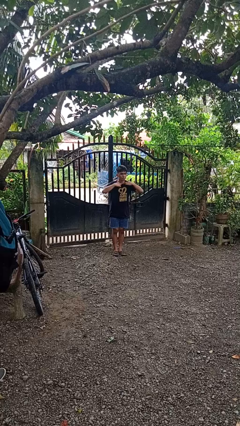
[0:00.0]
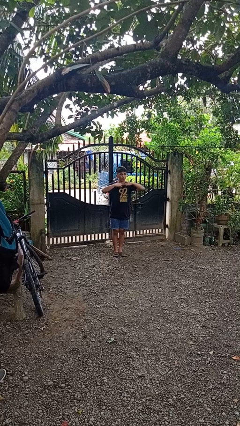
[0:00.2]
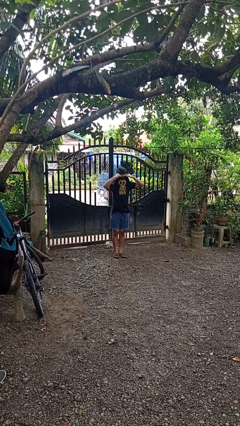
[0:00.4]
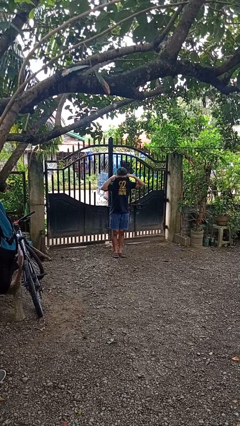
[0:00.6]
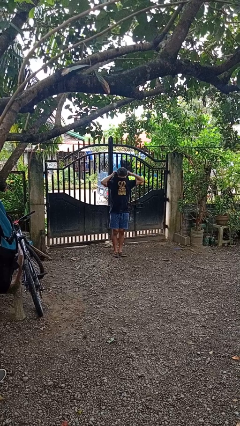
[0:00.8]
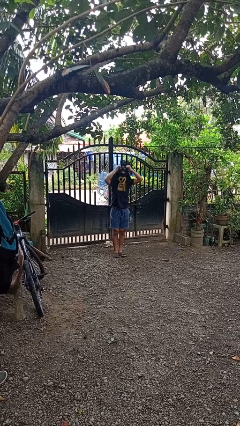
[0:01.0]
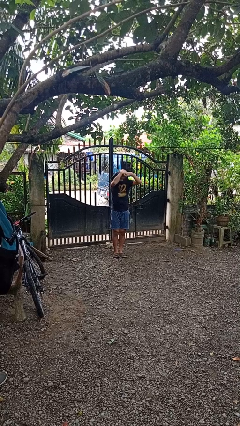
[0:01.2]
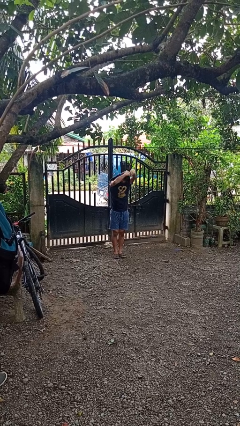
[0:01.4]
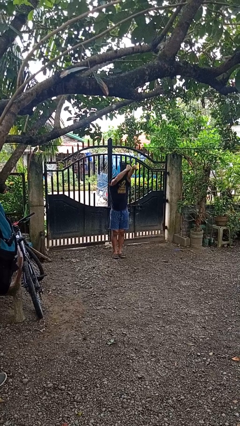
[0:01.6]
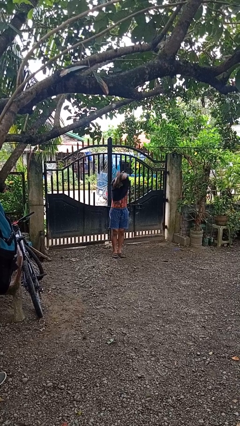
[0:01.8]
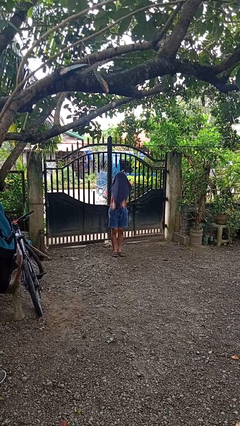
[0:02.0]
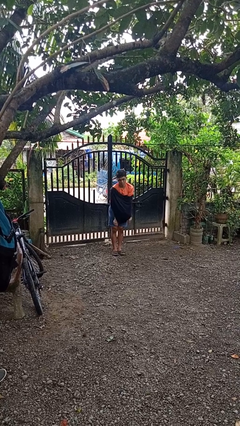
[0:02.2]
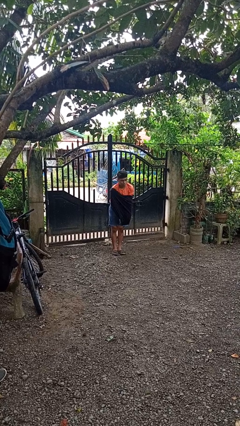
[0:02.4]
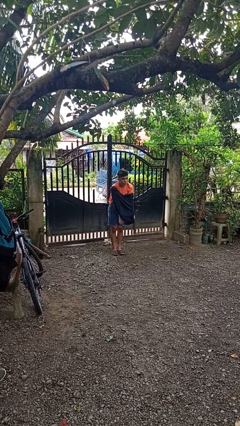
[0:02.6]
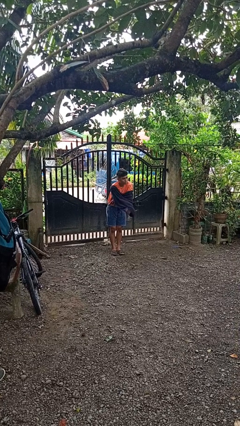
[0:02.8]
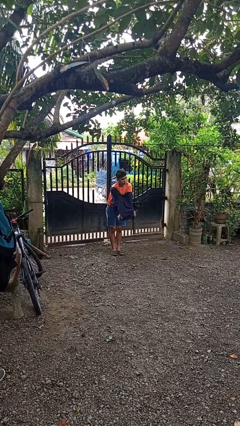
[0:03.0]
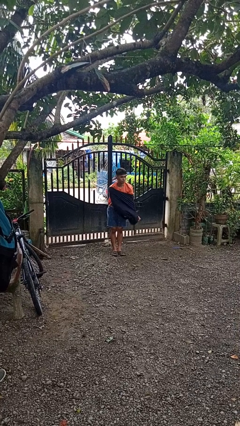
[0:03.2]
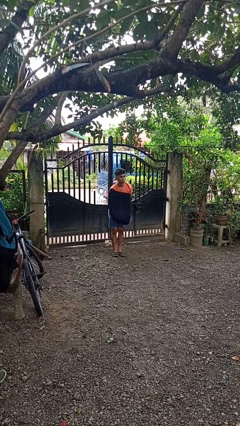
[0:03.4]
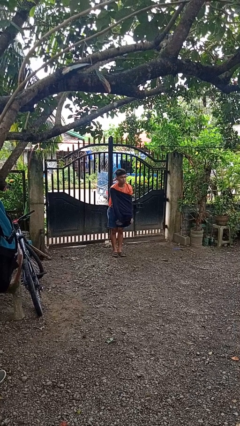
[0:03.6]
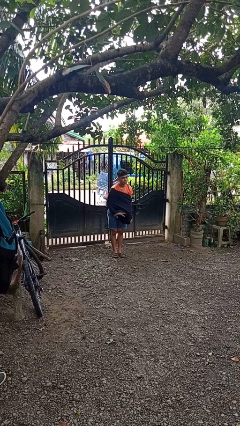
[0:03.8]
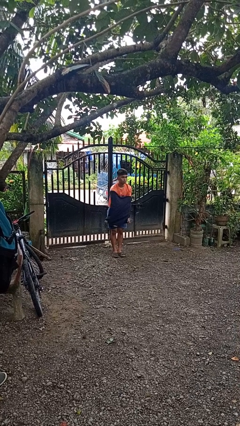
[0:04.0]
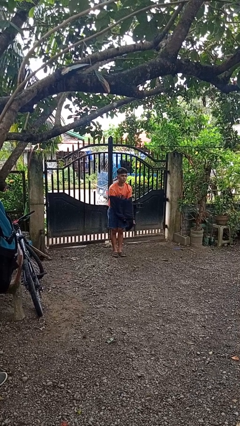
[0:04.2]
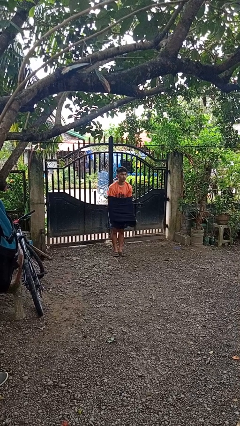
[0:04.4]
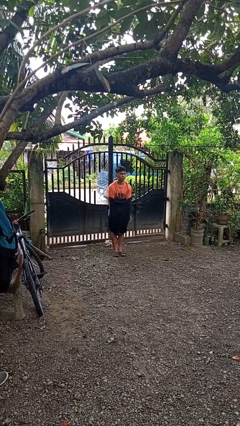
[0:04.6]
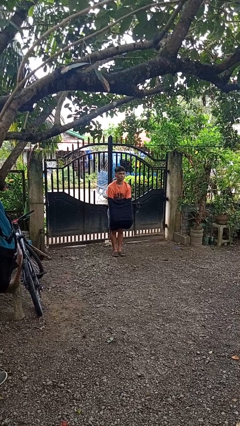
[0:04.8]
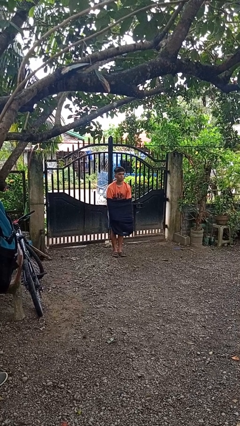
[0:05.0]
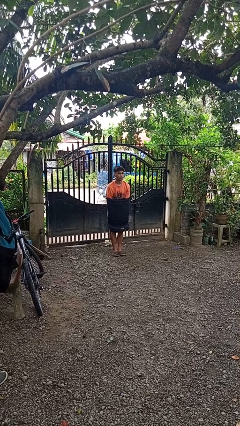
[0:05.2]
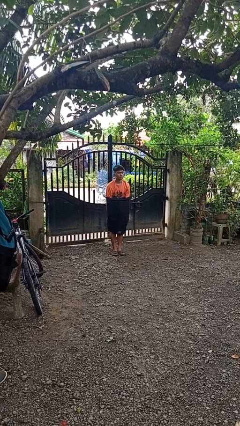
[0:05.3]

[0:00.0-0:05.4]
person takes off shirt

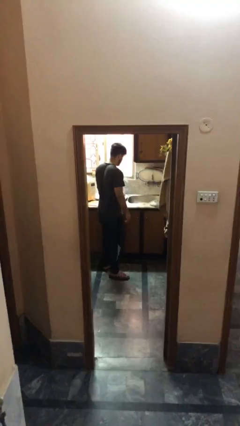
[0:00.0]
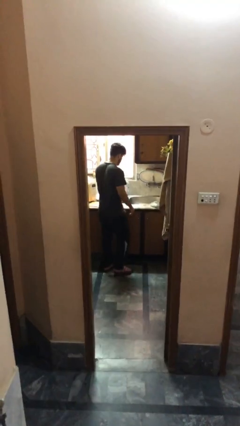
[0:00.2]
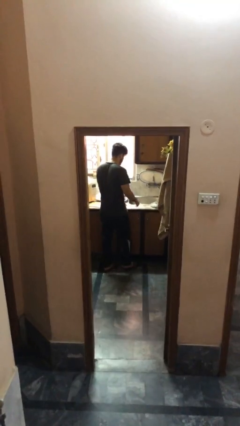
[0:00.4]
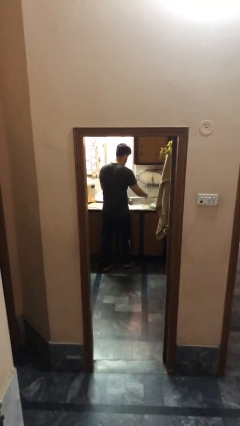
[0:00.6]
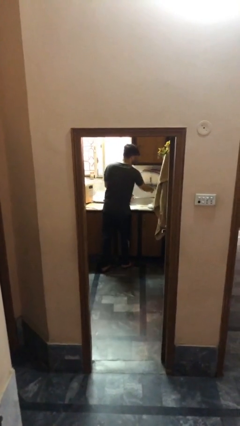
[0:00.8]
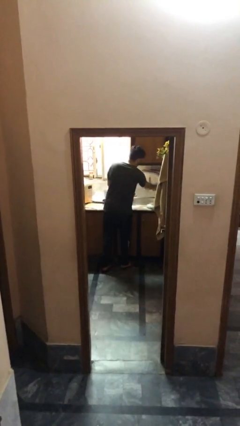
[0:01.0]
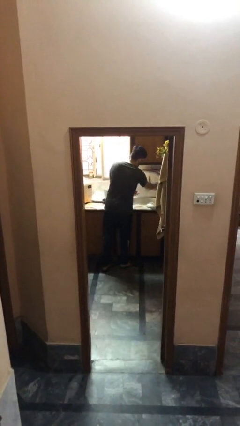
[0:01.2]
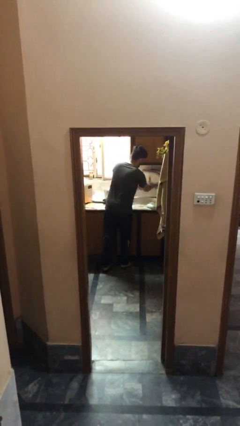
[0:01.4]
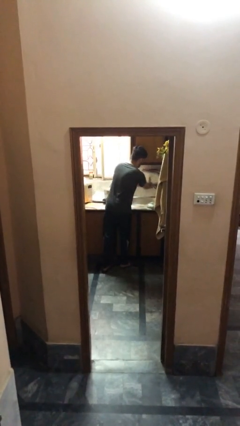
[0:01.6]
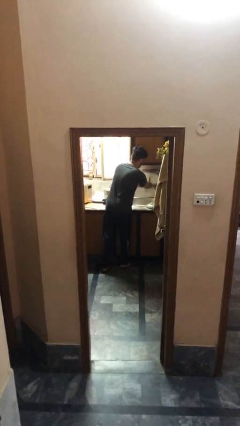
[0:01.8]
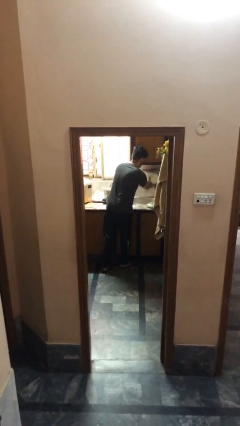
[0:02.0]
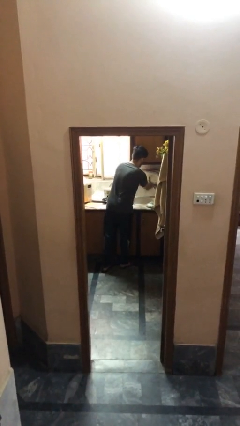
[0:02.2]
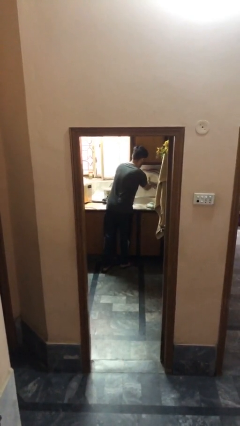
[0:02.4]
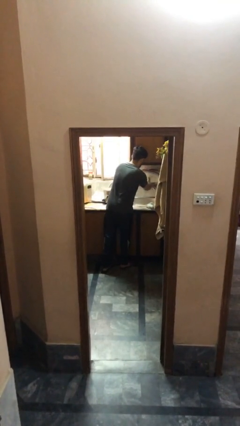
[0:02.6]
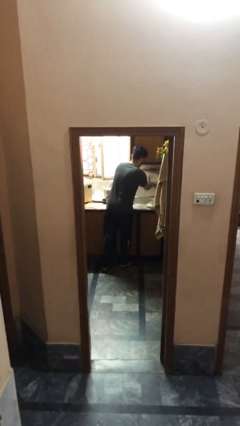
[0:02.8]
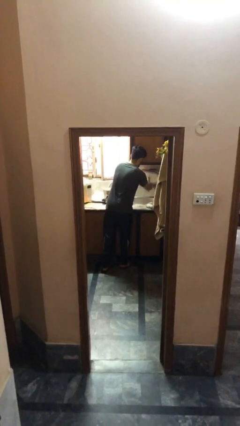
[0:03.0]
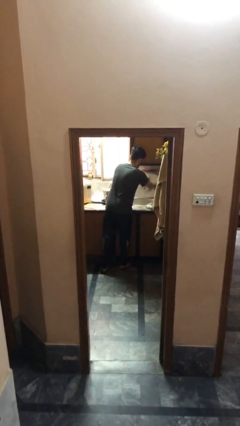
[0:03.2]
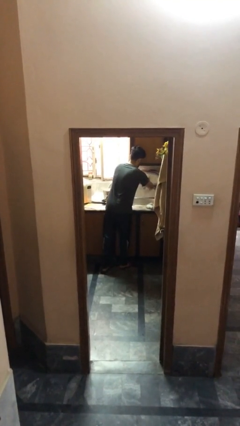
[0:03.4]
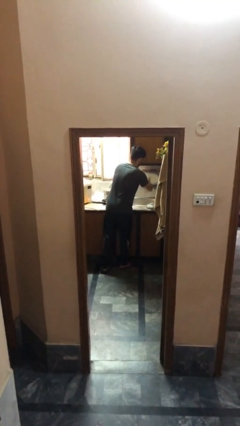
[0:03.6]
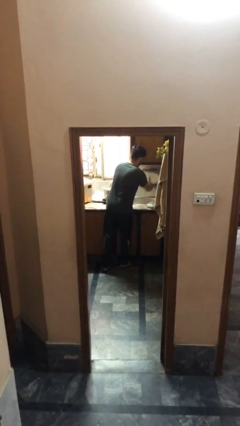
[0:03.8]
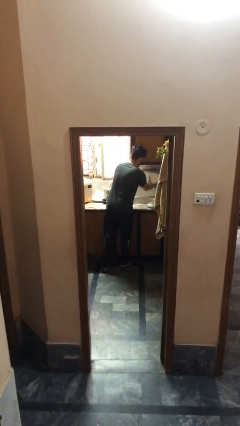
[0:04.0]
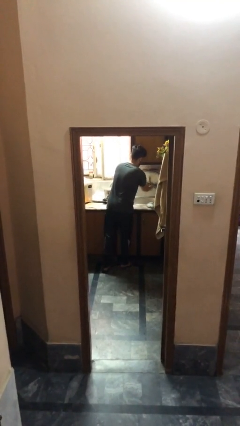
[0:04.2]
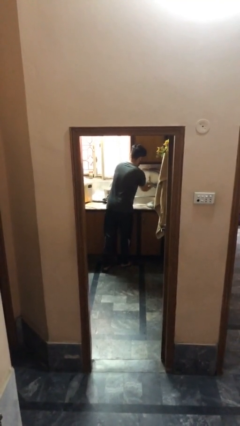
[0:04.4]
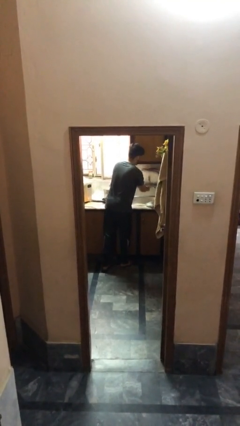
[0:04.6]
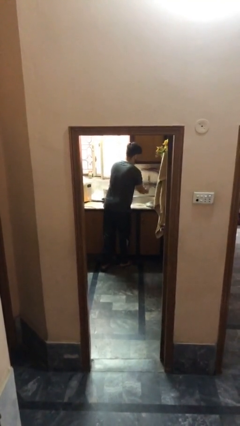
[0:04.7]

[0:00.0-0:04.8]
person washes hands

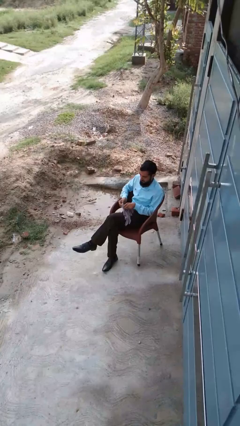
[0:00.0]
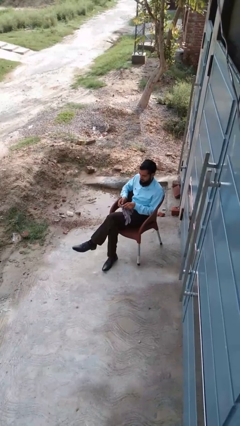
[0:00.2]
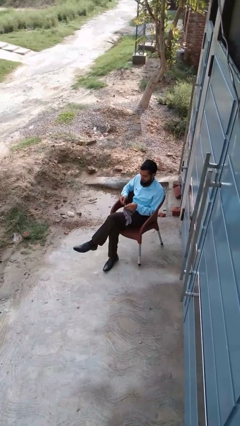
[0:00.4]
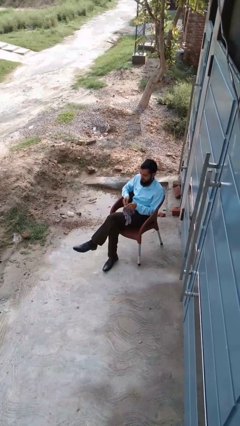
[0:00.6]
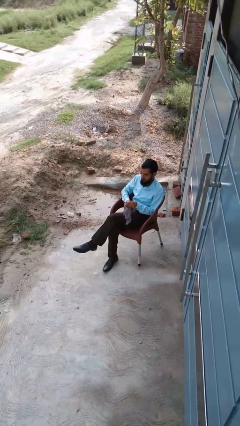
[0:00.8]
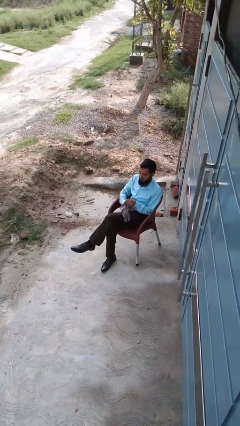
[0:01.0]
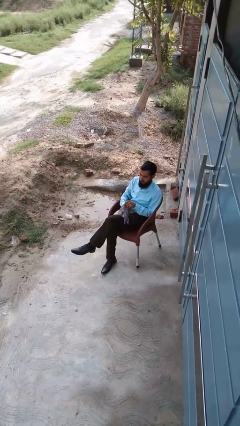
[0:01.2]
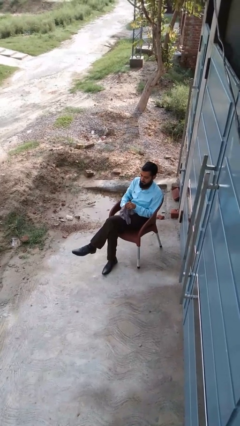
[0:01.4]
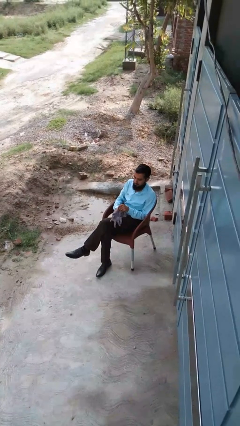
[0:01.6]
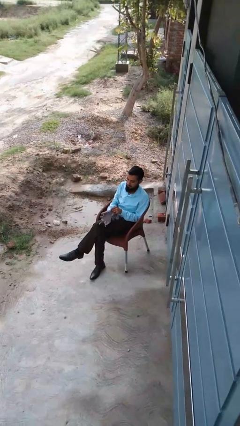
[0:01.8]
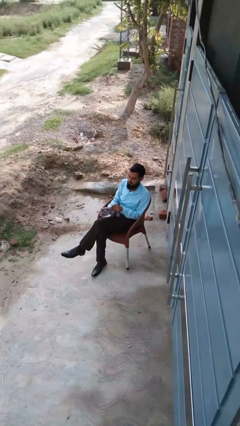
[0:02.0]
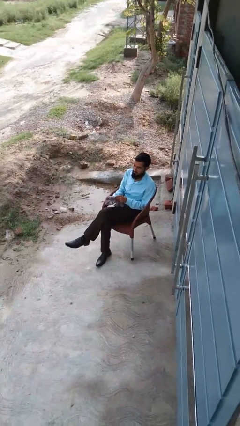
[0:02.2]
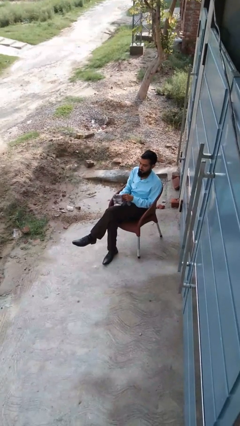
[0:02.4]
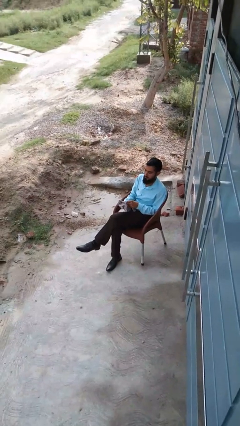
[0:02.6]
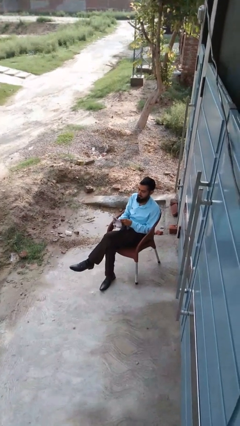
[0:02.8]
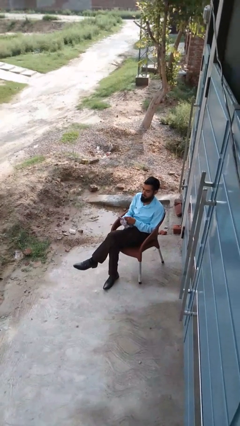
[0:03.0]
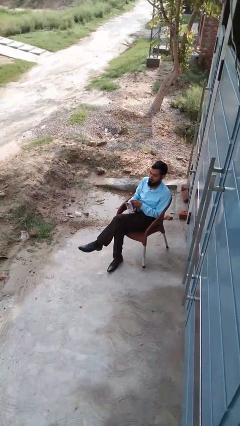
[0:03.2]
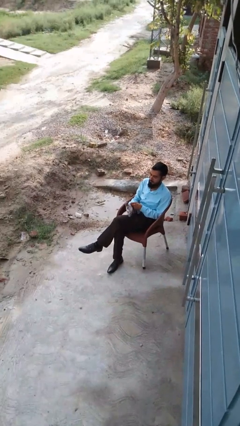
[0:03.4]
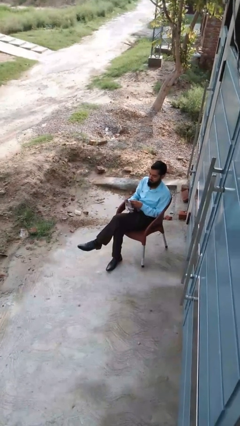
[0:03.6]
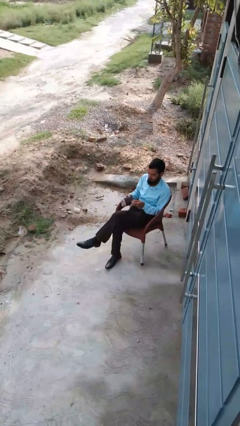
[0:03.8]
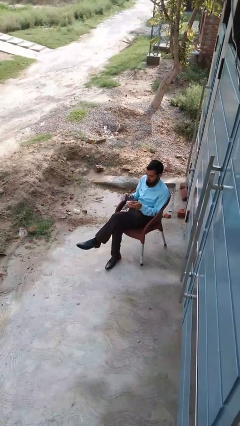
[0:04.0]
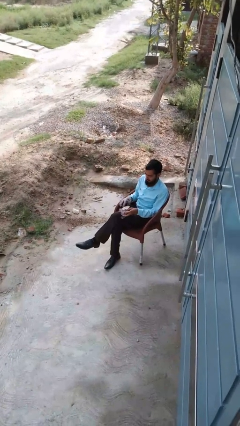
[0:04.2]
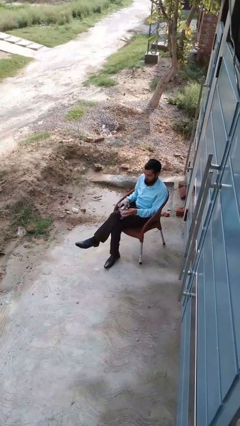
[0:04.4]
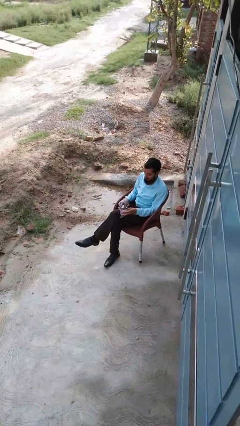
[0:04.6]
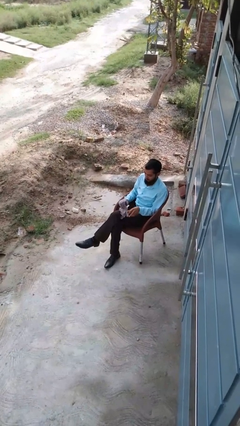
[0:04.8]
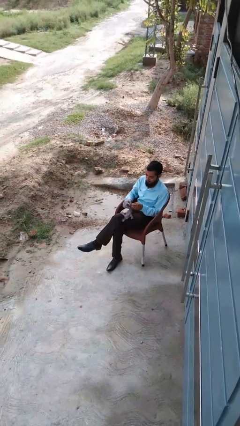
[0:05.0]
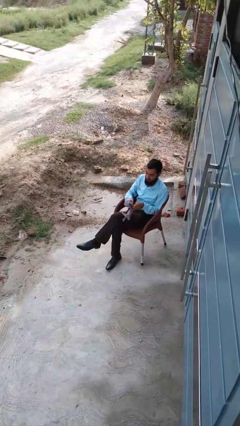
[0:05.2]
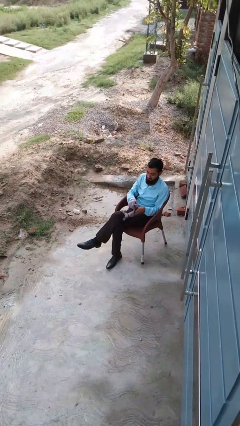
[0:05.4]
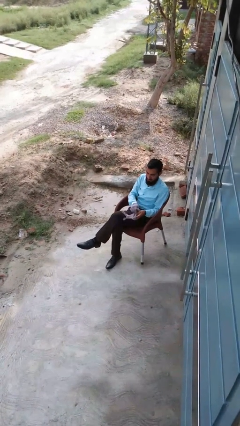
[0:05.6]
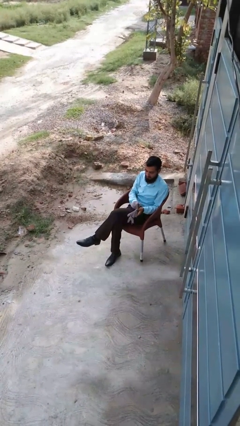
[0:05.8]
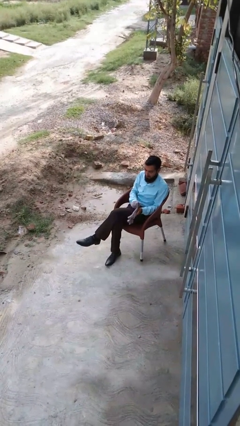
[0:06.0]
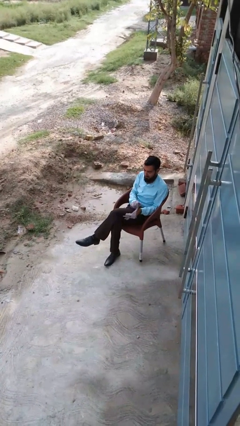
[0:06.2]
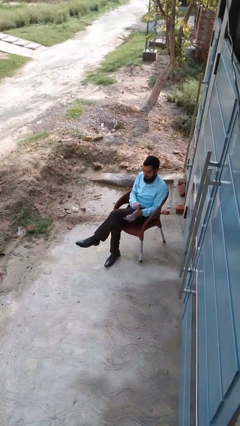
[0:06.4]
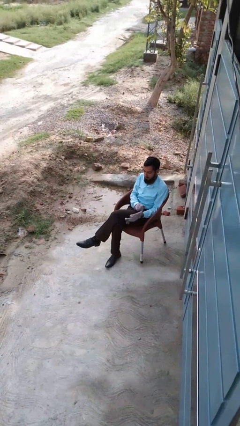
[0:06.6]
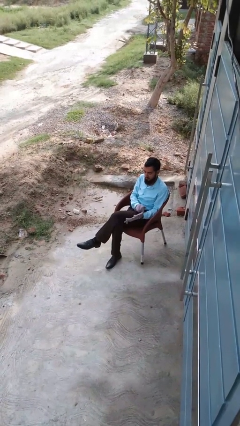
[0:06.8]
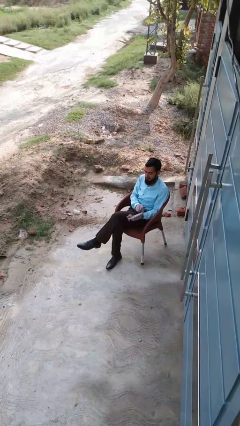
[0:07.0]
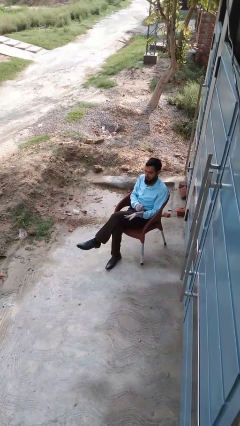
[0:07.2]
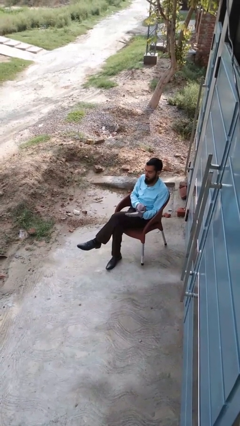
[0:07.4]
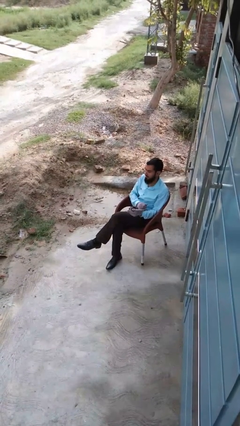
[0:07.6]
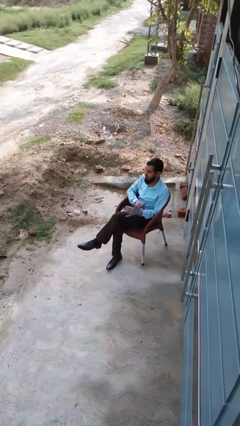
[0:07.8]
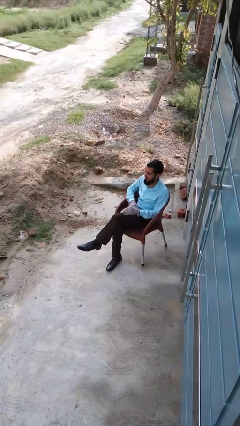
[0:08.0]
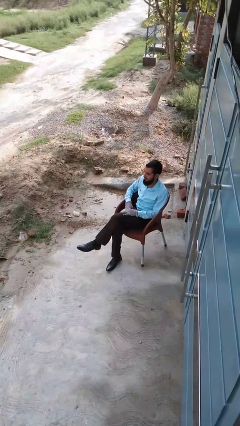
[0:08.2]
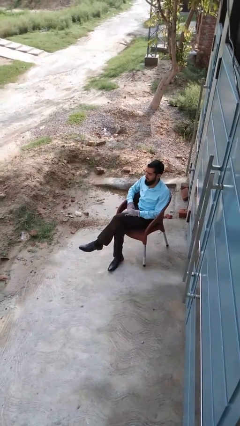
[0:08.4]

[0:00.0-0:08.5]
person puts on gloves
